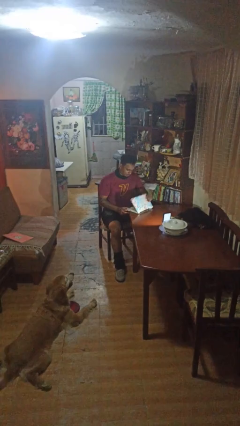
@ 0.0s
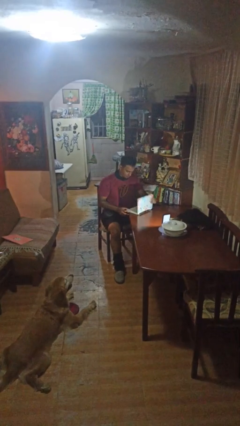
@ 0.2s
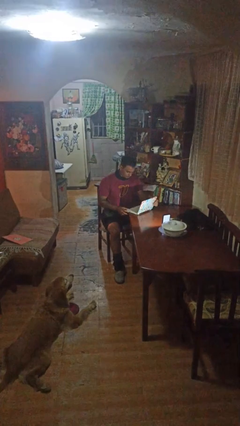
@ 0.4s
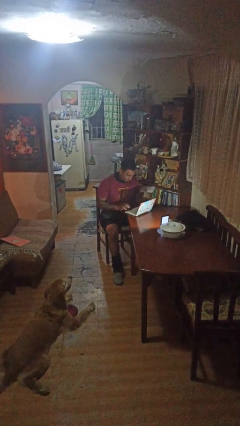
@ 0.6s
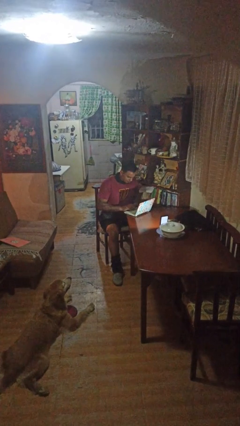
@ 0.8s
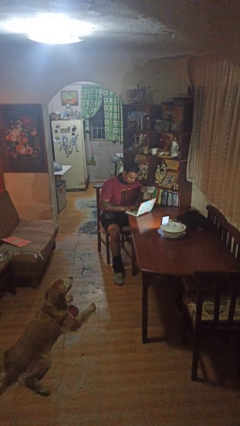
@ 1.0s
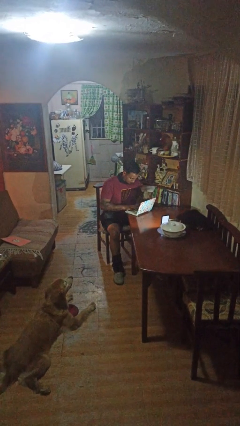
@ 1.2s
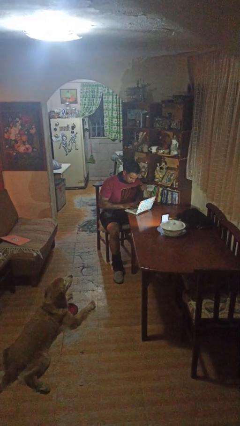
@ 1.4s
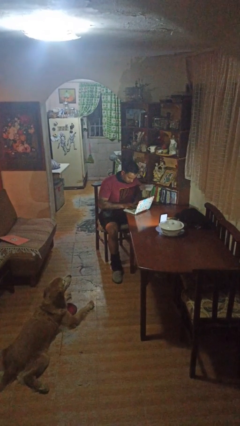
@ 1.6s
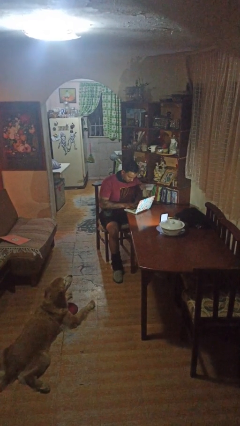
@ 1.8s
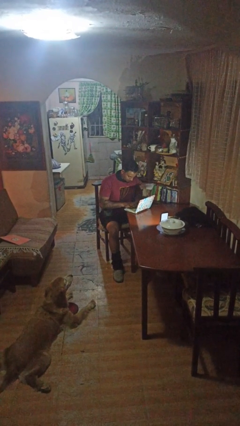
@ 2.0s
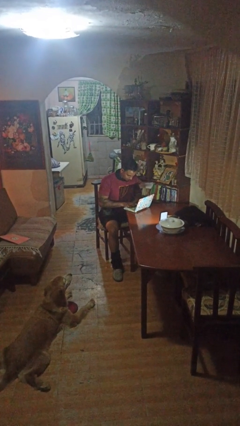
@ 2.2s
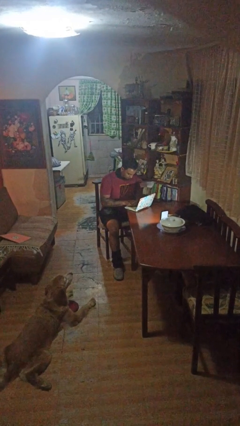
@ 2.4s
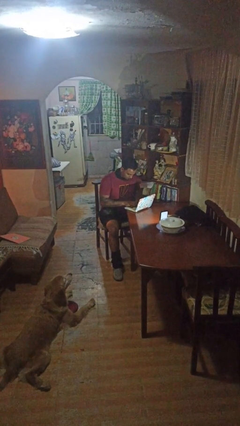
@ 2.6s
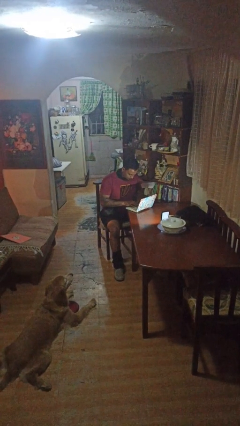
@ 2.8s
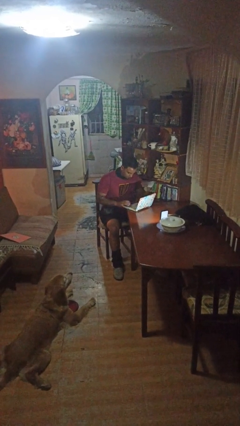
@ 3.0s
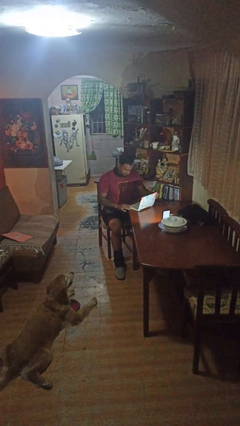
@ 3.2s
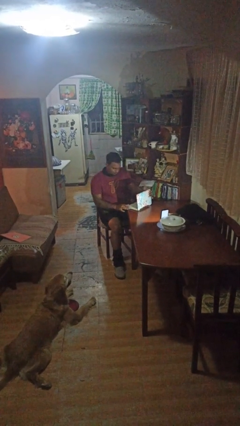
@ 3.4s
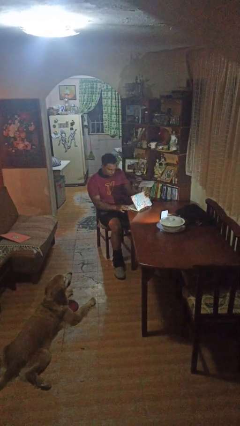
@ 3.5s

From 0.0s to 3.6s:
person interacts with laptop

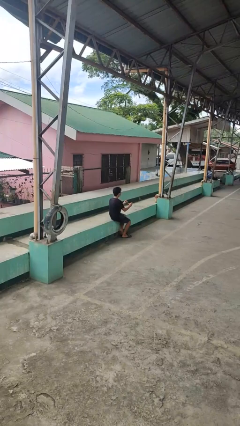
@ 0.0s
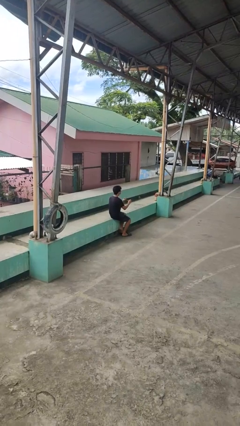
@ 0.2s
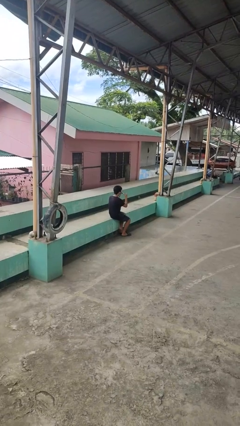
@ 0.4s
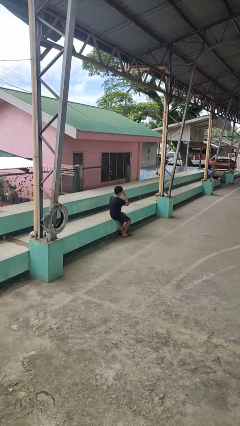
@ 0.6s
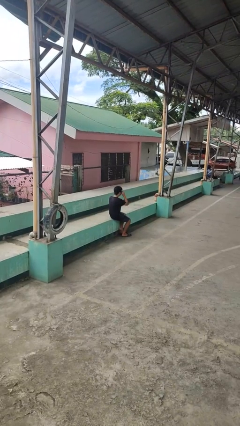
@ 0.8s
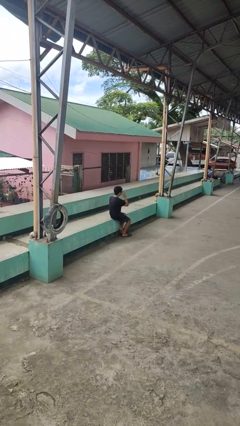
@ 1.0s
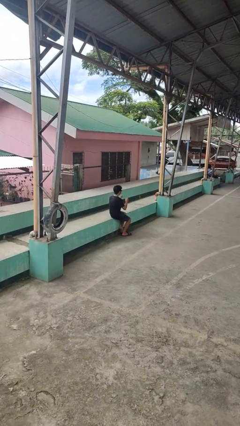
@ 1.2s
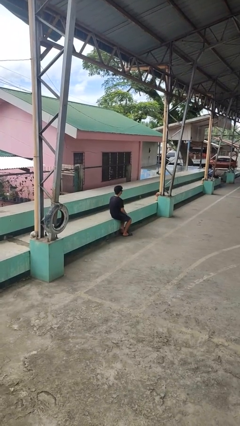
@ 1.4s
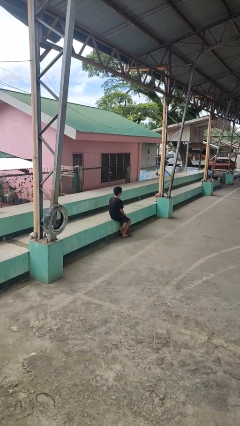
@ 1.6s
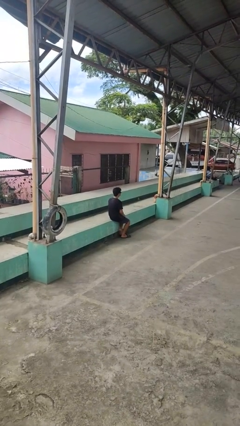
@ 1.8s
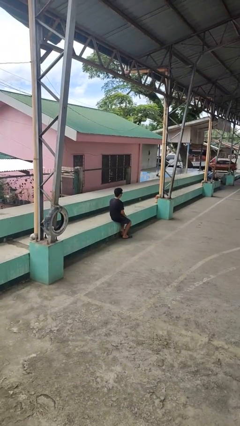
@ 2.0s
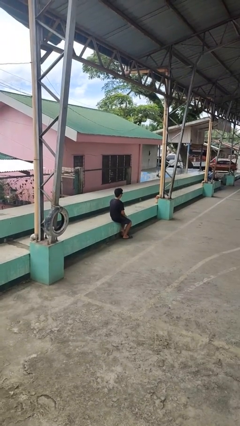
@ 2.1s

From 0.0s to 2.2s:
person puts on sunglasses

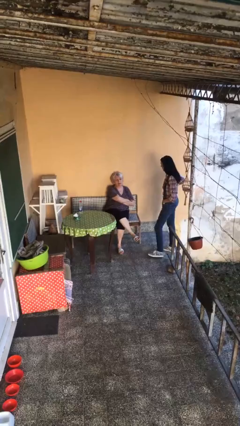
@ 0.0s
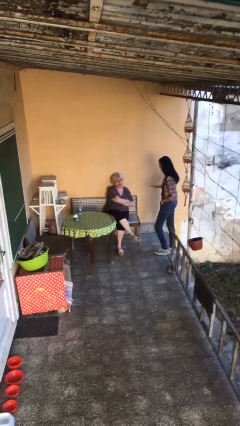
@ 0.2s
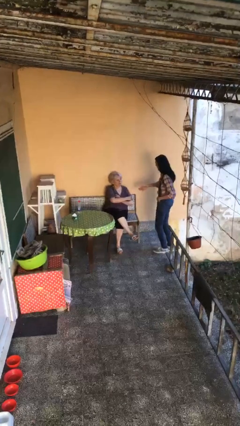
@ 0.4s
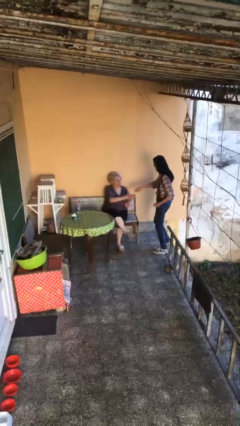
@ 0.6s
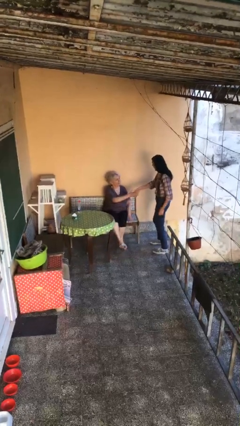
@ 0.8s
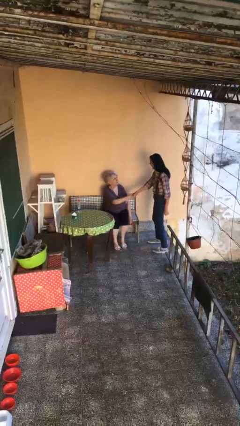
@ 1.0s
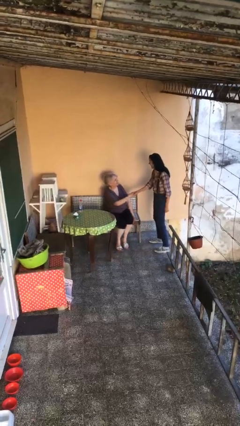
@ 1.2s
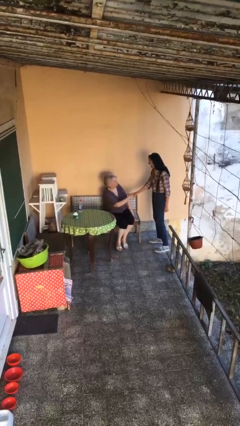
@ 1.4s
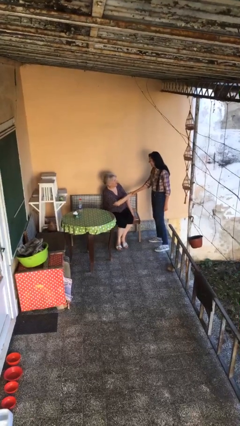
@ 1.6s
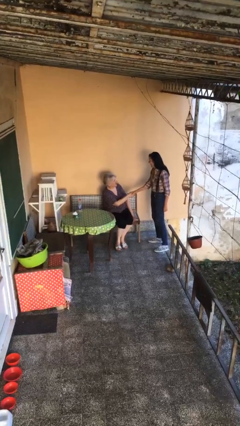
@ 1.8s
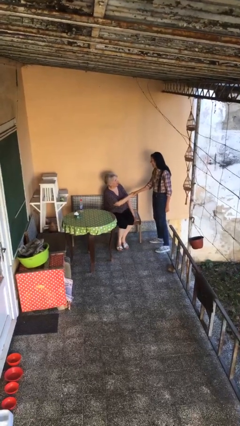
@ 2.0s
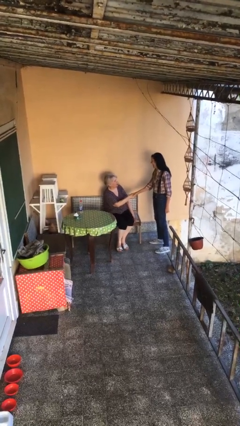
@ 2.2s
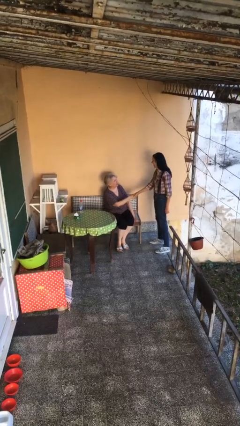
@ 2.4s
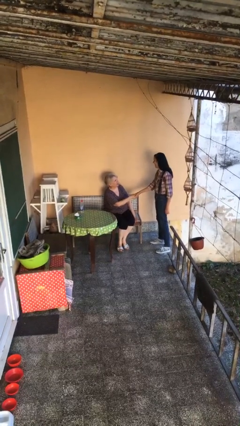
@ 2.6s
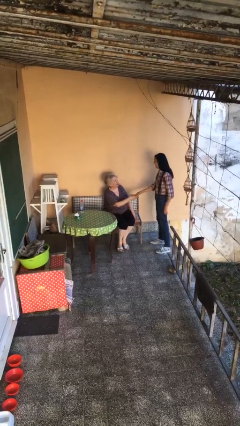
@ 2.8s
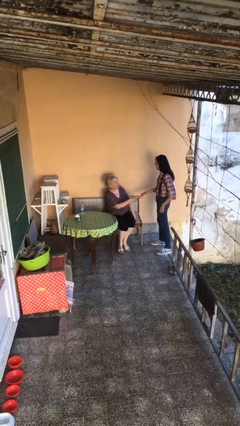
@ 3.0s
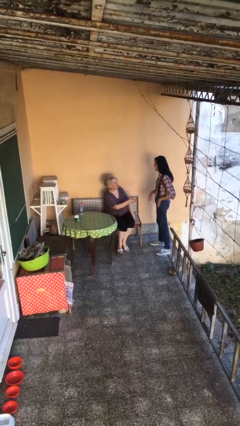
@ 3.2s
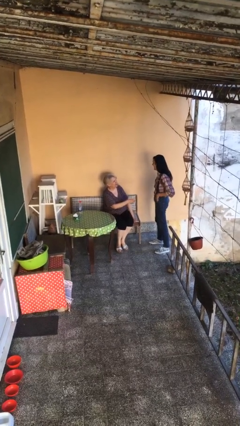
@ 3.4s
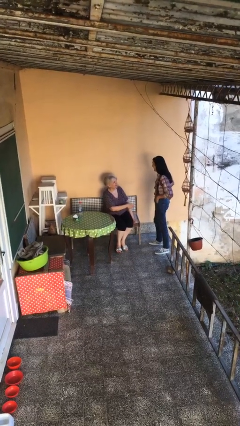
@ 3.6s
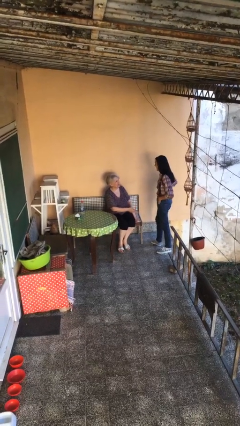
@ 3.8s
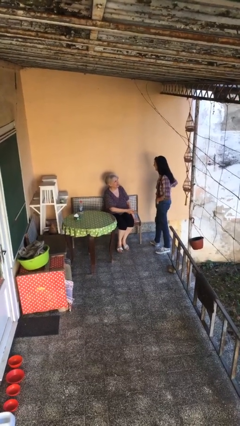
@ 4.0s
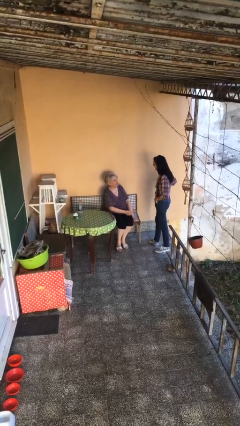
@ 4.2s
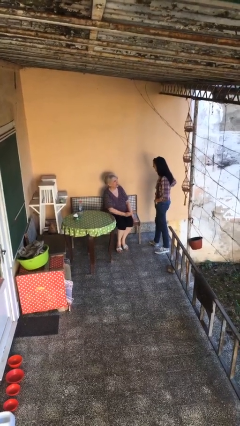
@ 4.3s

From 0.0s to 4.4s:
person shakes hand

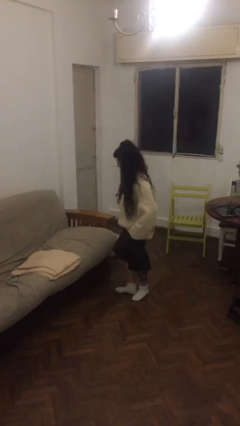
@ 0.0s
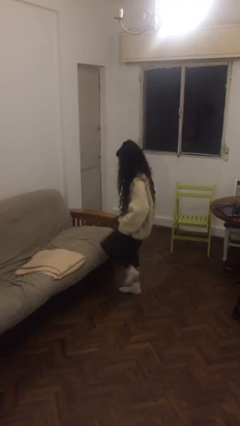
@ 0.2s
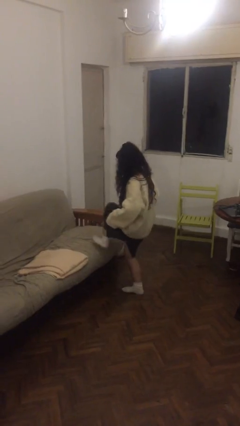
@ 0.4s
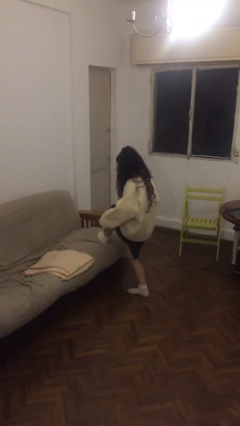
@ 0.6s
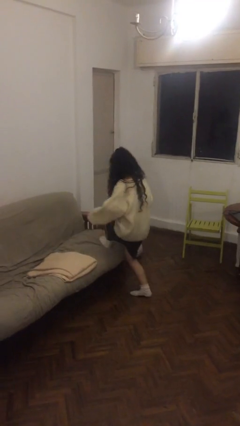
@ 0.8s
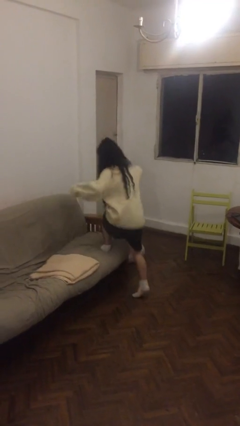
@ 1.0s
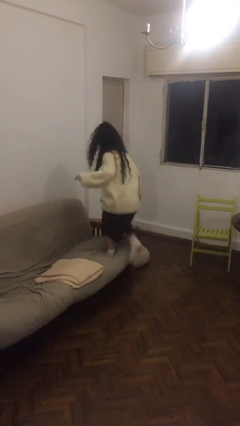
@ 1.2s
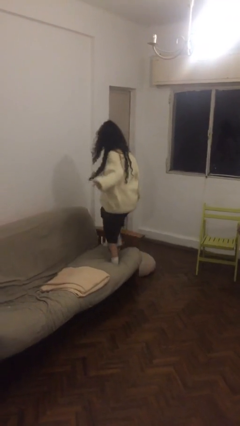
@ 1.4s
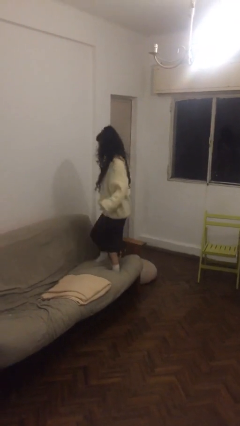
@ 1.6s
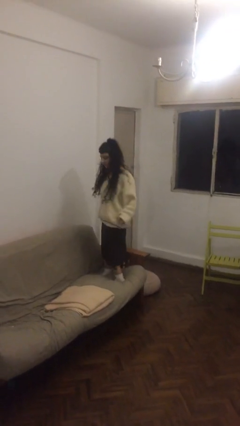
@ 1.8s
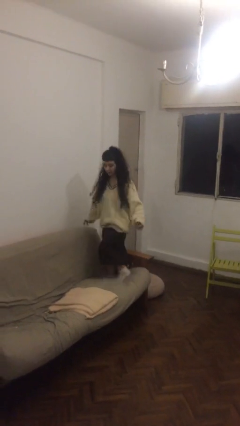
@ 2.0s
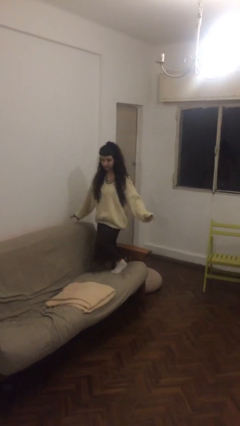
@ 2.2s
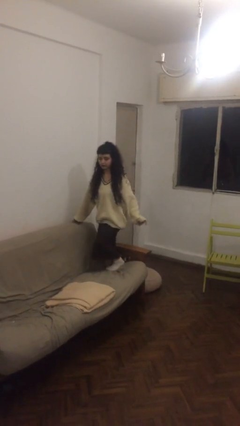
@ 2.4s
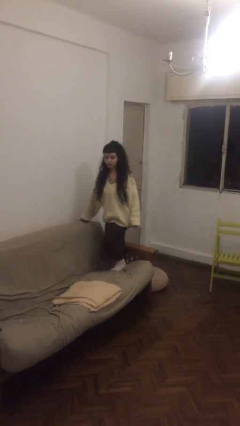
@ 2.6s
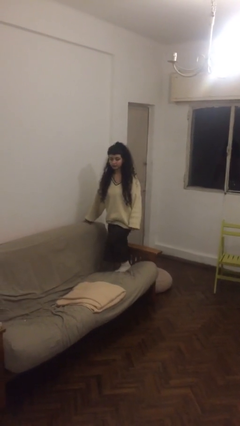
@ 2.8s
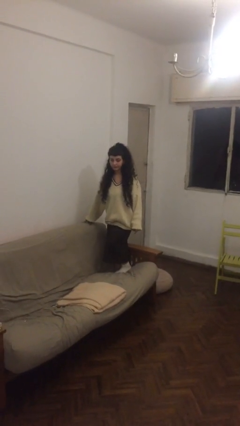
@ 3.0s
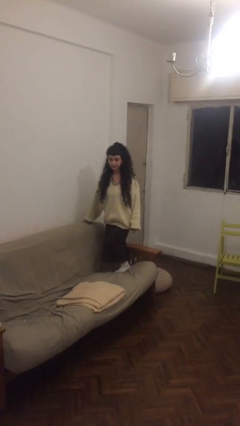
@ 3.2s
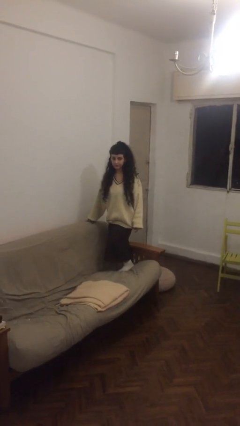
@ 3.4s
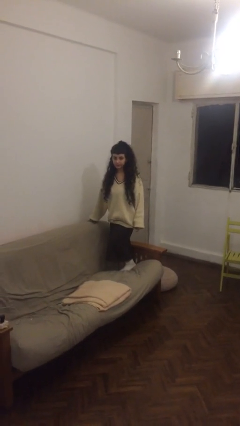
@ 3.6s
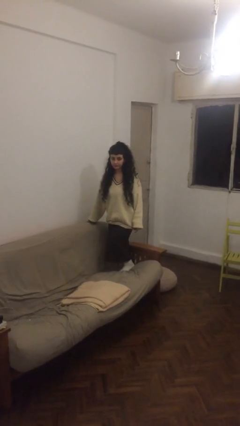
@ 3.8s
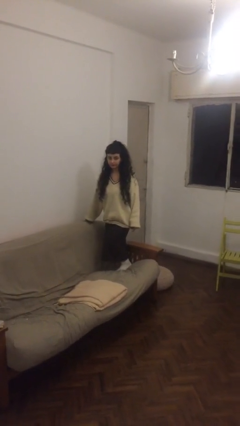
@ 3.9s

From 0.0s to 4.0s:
person climbs on couch

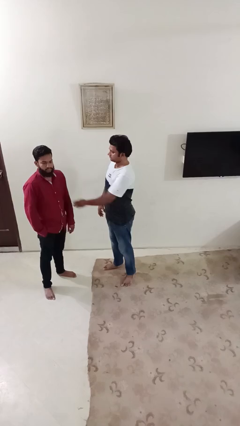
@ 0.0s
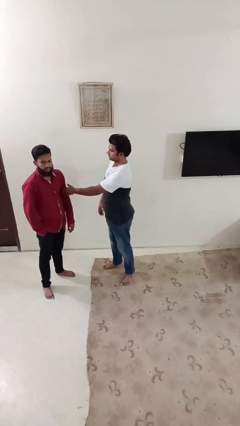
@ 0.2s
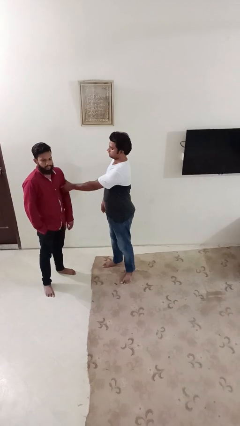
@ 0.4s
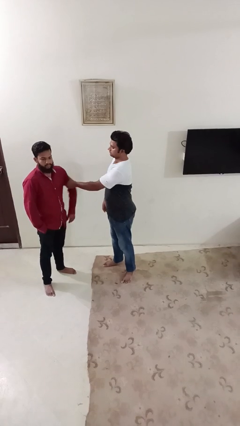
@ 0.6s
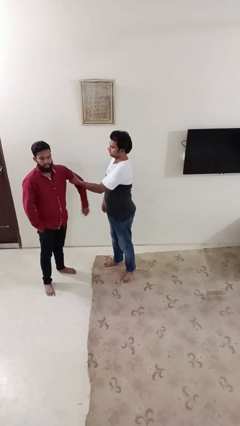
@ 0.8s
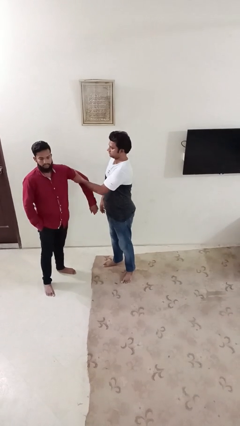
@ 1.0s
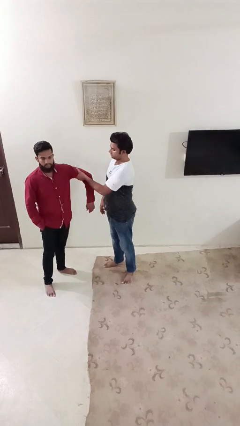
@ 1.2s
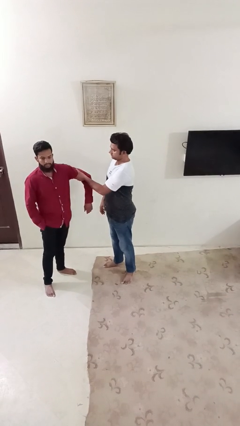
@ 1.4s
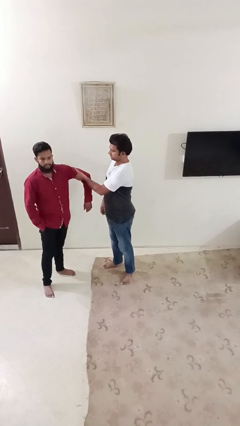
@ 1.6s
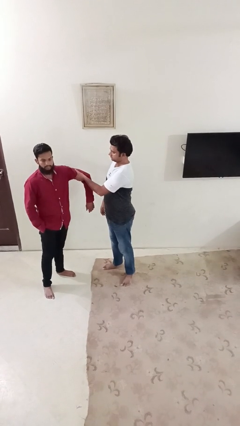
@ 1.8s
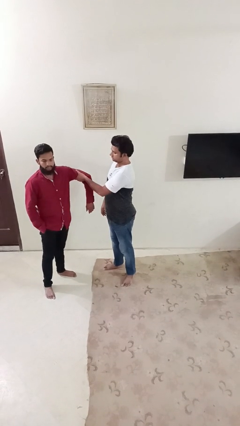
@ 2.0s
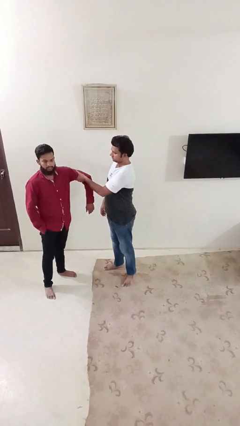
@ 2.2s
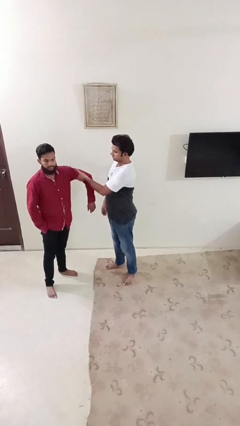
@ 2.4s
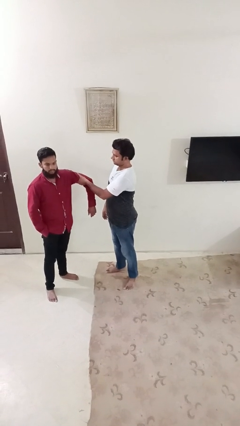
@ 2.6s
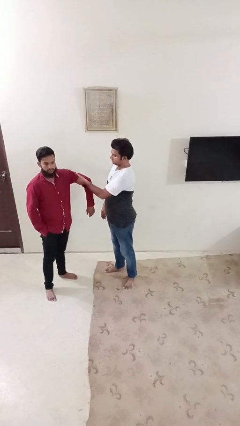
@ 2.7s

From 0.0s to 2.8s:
person grabs person by bicep

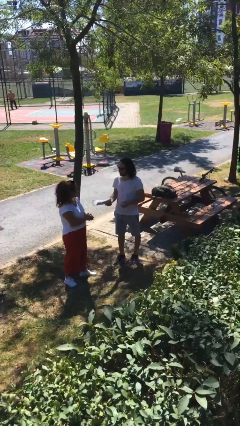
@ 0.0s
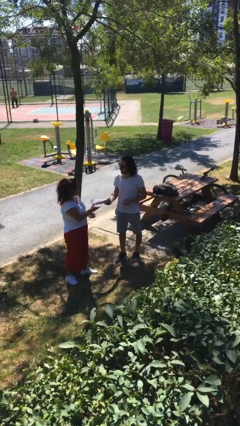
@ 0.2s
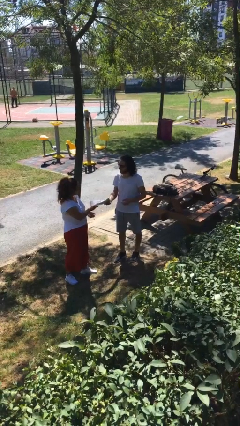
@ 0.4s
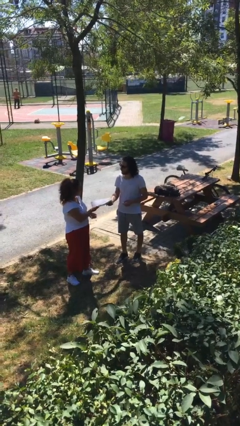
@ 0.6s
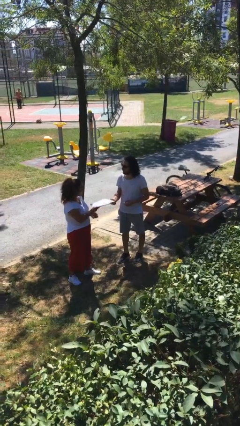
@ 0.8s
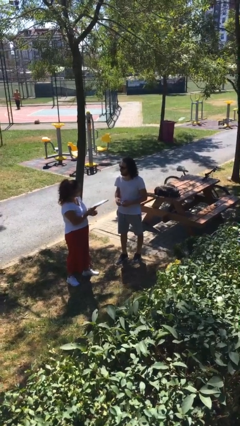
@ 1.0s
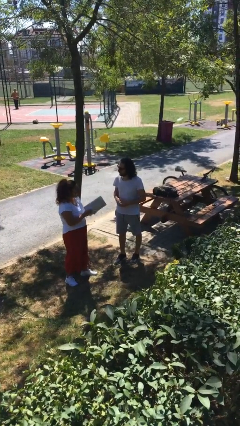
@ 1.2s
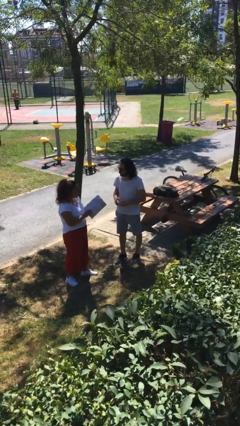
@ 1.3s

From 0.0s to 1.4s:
person transfers object to person
